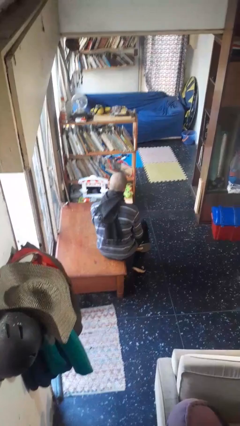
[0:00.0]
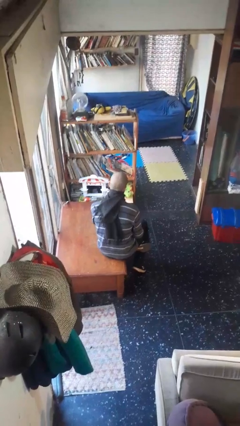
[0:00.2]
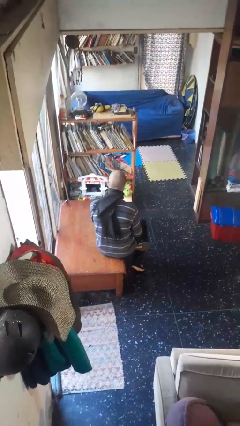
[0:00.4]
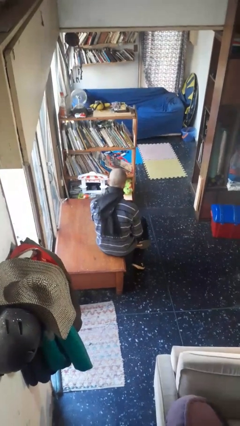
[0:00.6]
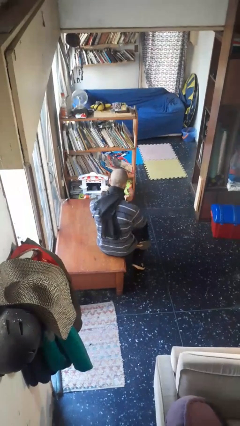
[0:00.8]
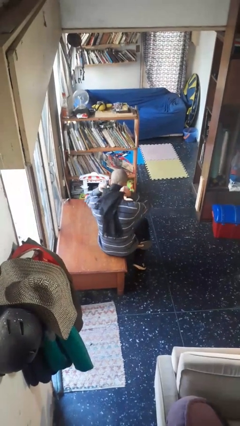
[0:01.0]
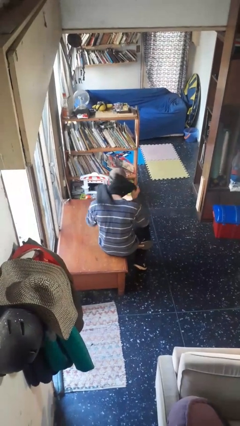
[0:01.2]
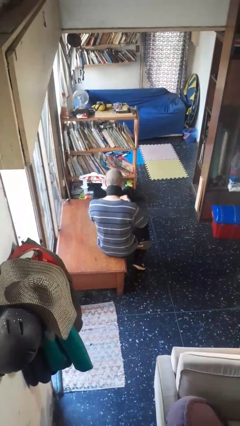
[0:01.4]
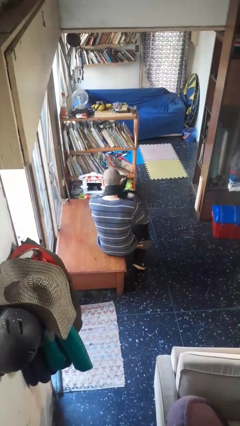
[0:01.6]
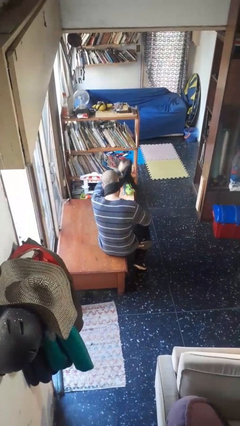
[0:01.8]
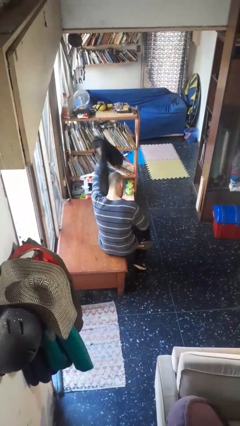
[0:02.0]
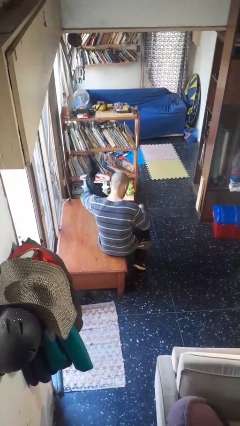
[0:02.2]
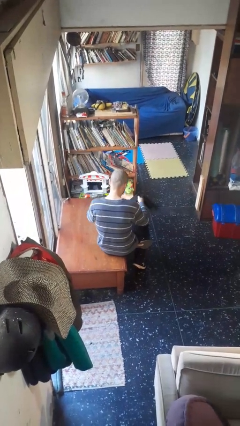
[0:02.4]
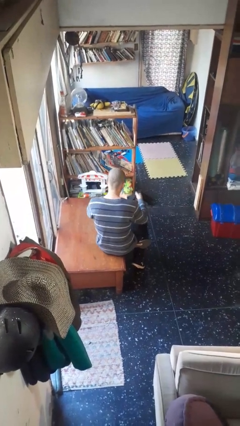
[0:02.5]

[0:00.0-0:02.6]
person takes off scarf

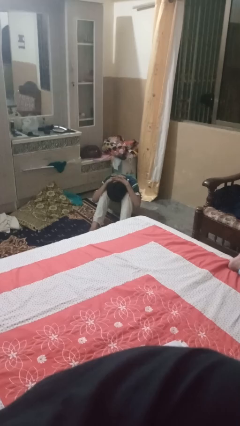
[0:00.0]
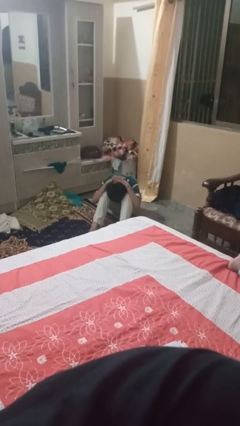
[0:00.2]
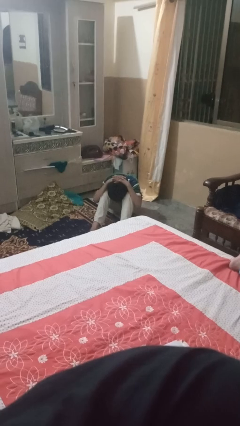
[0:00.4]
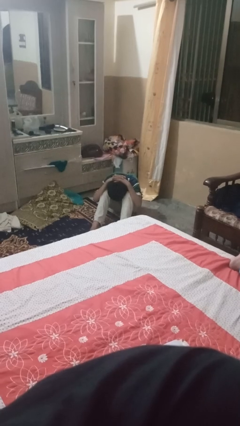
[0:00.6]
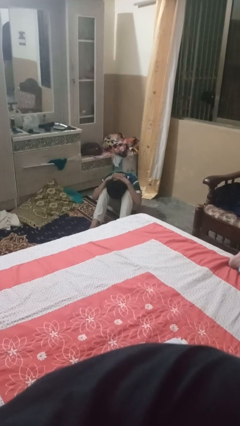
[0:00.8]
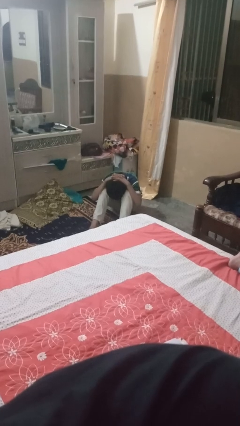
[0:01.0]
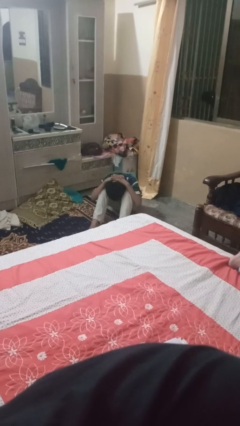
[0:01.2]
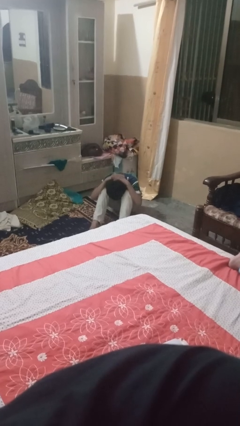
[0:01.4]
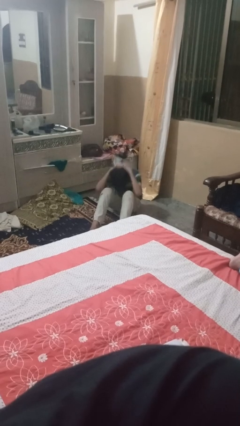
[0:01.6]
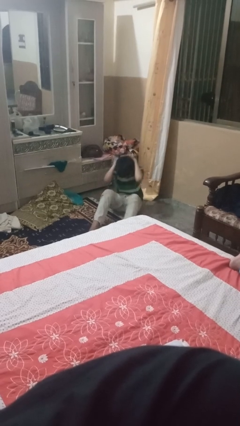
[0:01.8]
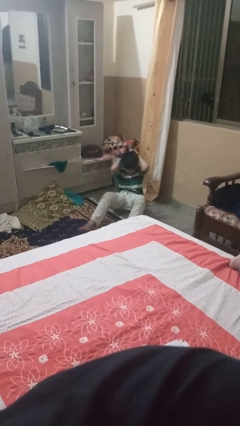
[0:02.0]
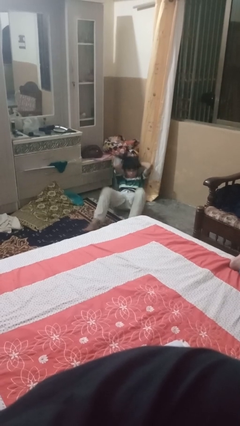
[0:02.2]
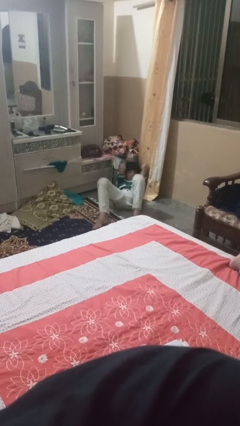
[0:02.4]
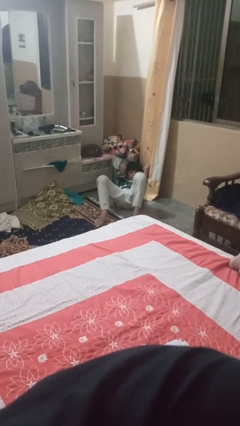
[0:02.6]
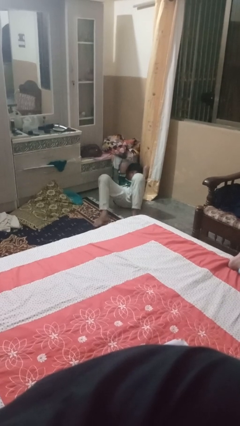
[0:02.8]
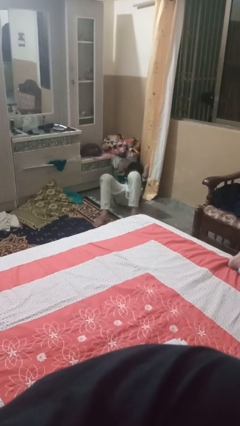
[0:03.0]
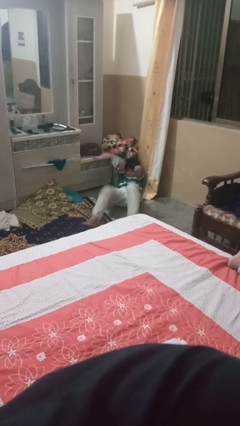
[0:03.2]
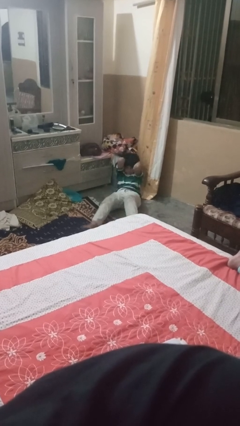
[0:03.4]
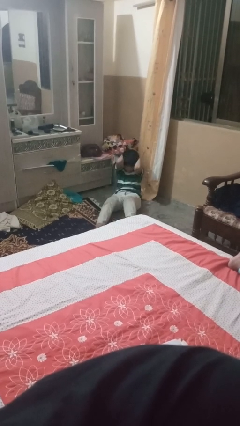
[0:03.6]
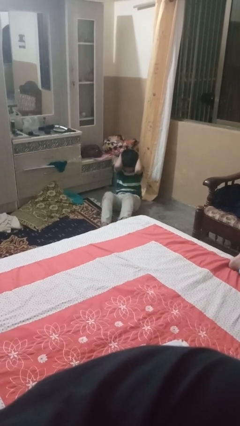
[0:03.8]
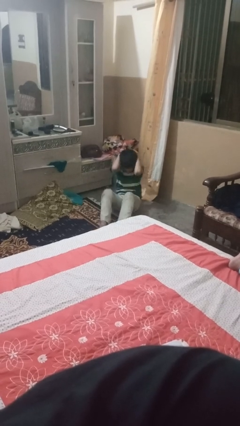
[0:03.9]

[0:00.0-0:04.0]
person exercises with situp

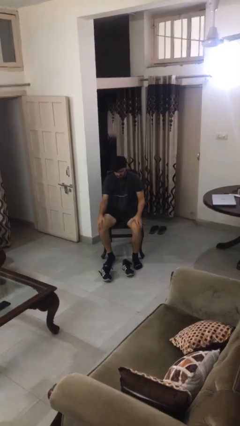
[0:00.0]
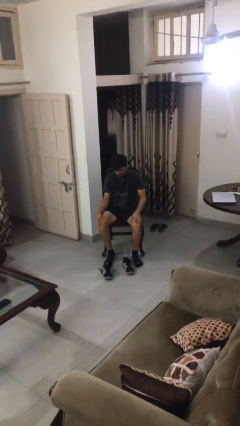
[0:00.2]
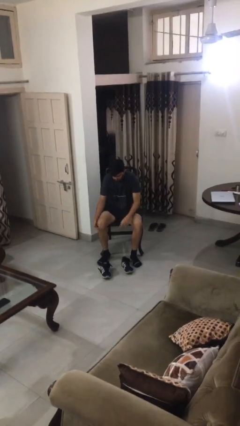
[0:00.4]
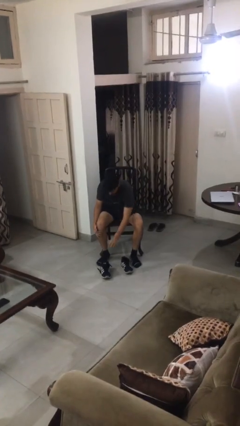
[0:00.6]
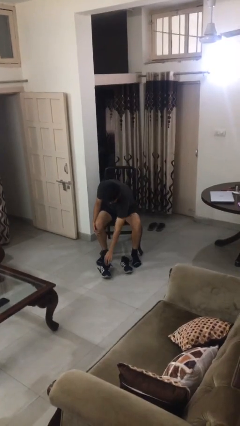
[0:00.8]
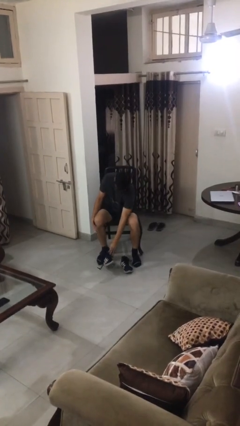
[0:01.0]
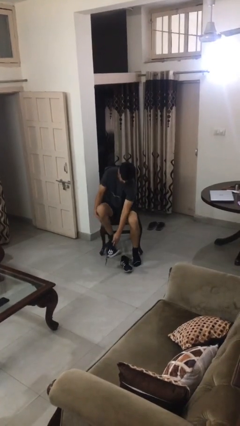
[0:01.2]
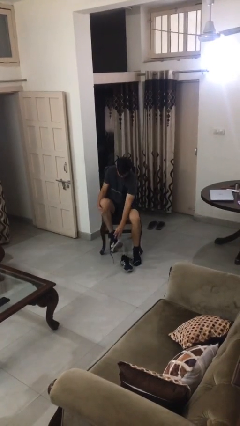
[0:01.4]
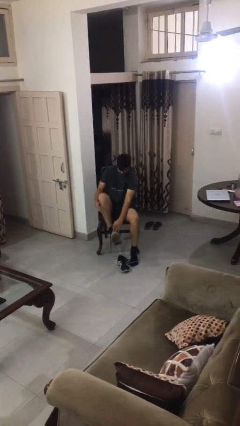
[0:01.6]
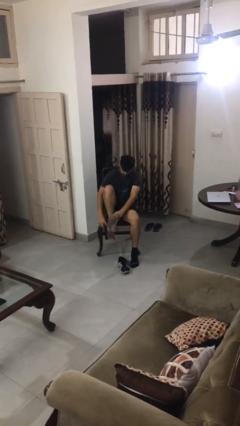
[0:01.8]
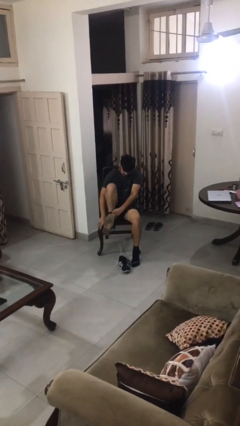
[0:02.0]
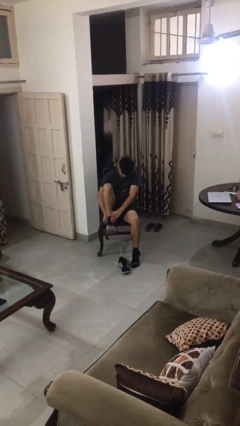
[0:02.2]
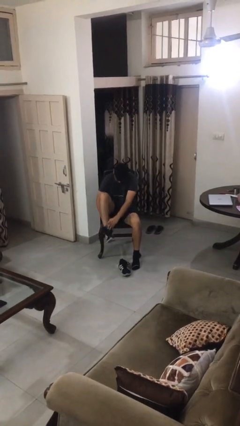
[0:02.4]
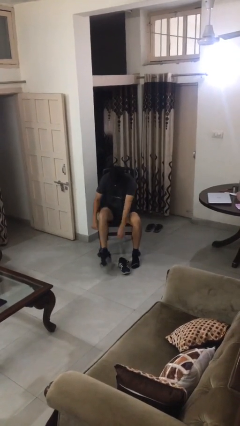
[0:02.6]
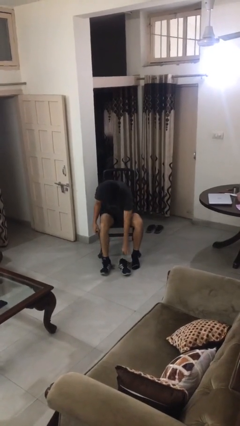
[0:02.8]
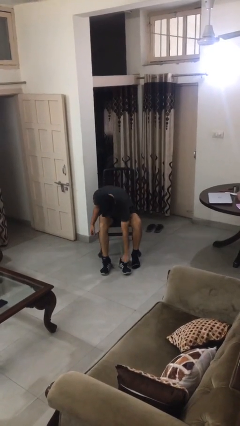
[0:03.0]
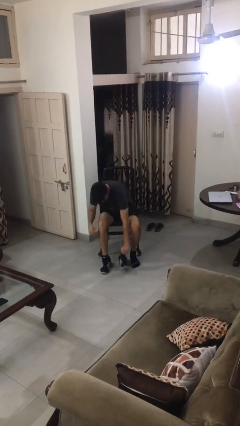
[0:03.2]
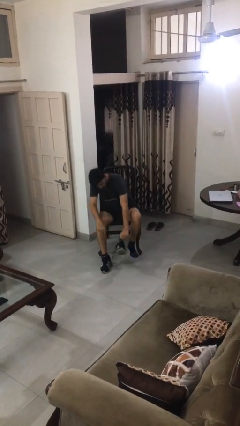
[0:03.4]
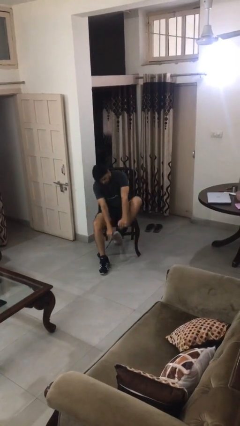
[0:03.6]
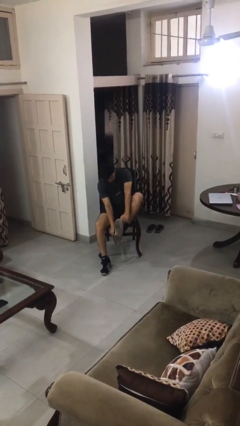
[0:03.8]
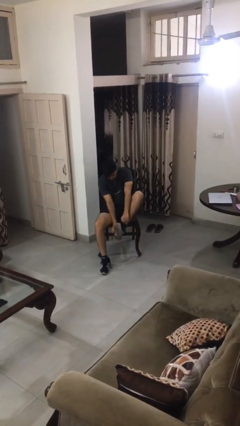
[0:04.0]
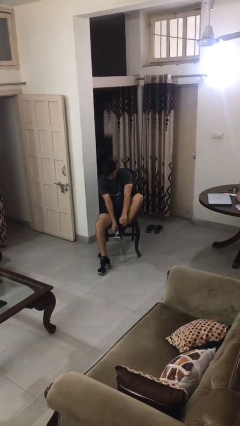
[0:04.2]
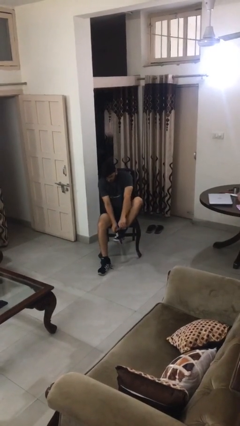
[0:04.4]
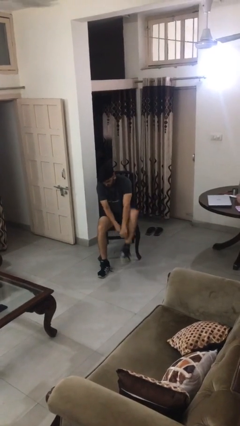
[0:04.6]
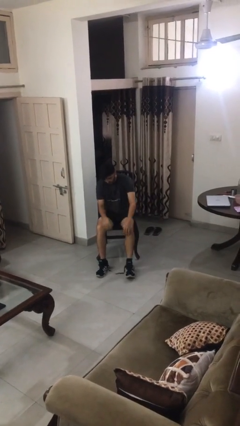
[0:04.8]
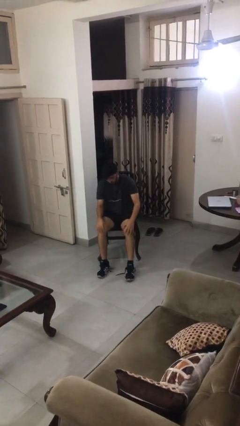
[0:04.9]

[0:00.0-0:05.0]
person puts on shoes

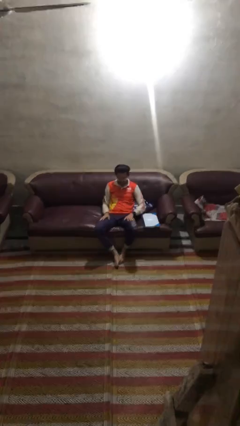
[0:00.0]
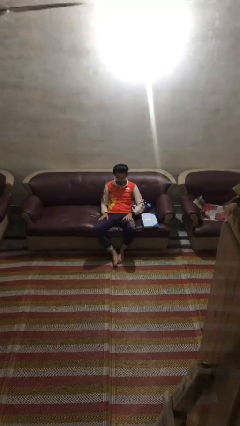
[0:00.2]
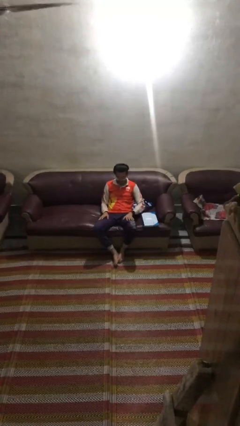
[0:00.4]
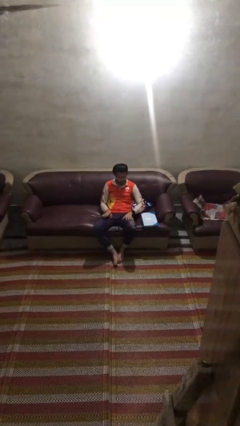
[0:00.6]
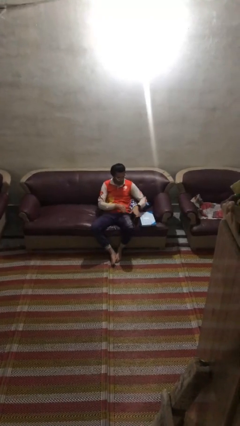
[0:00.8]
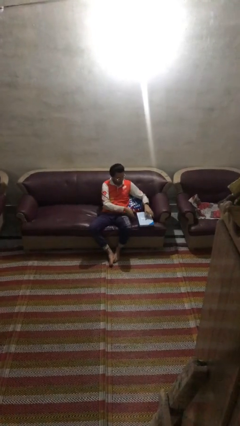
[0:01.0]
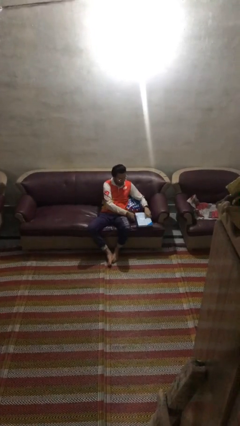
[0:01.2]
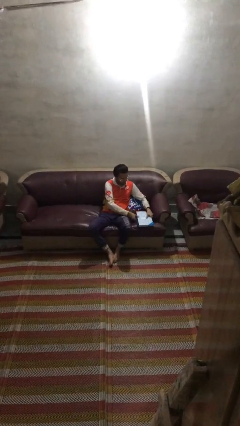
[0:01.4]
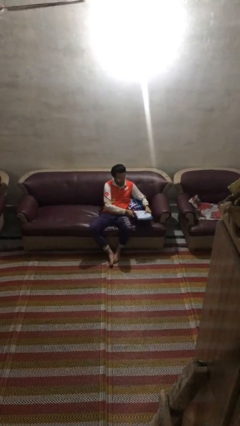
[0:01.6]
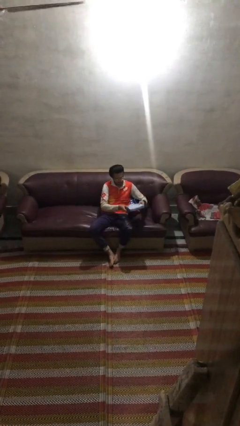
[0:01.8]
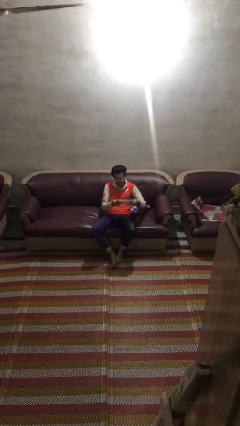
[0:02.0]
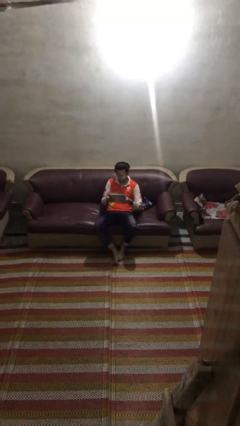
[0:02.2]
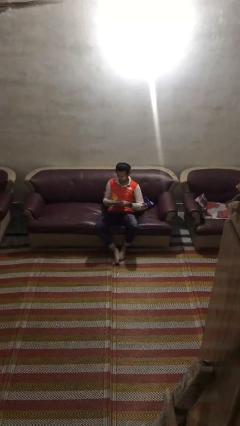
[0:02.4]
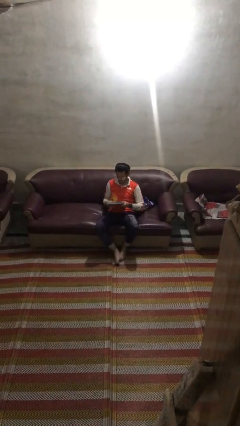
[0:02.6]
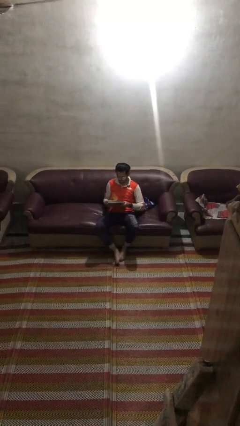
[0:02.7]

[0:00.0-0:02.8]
person picks up object from couch

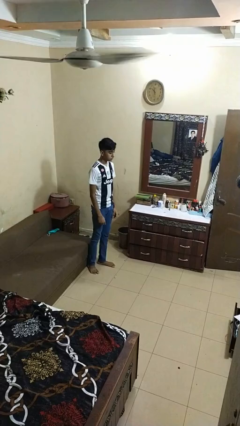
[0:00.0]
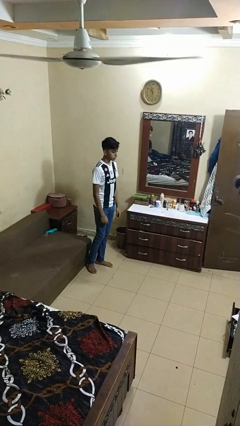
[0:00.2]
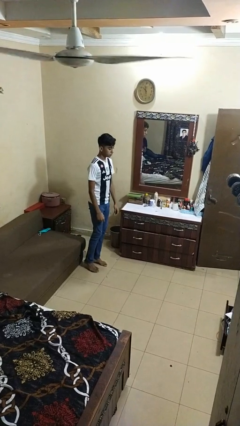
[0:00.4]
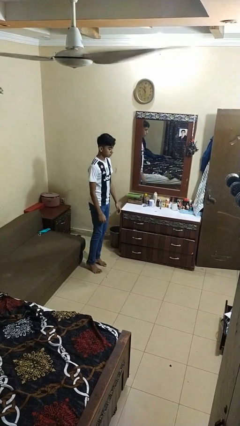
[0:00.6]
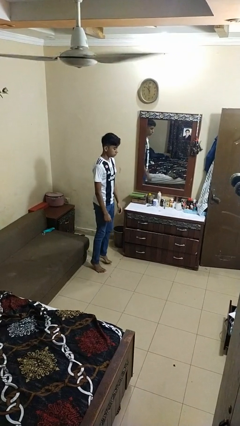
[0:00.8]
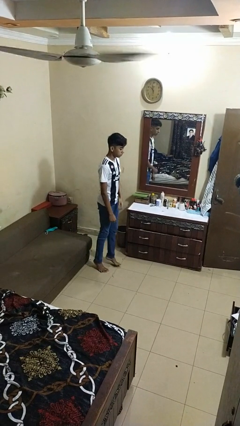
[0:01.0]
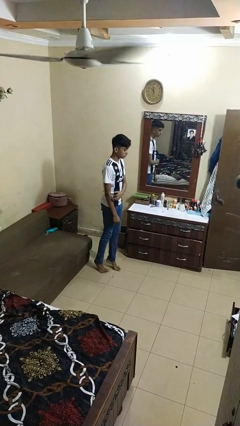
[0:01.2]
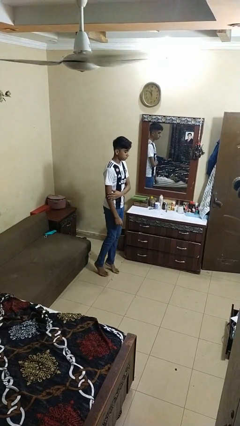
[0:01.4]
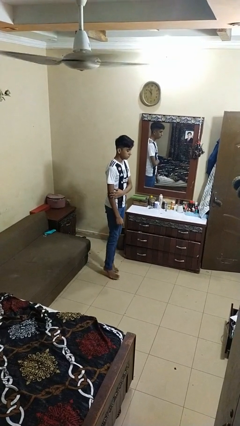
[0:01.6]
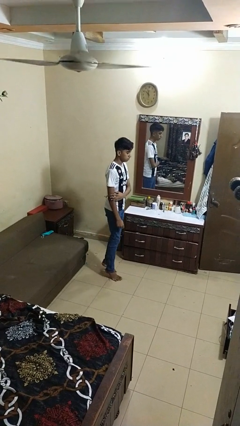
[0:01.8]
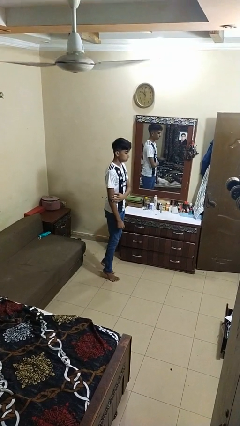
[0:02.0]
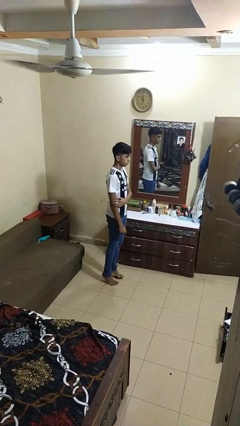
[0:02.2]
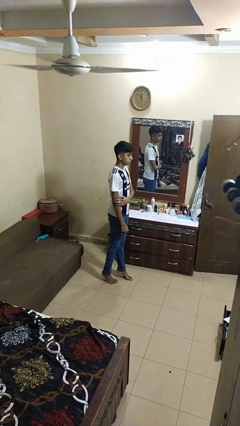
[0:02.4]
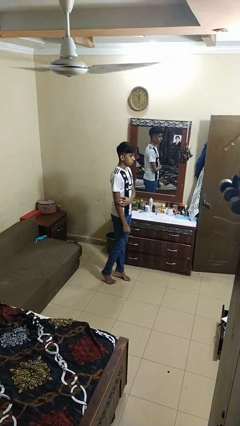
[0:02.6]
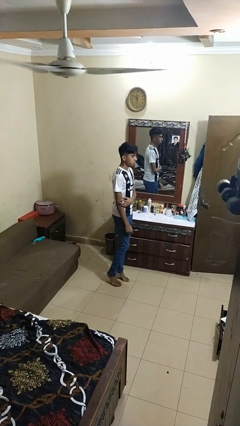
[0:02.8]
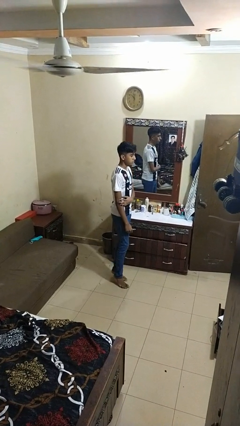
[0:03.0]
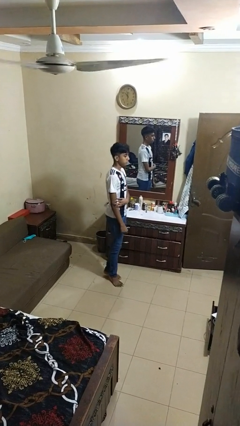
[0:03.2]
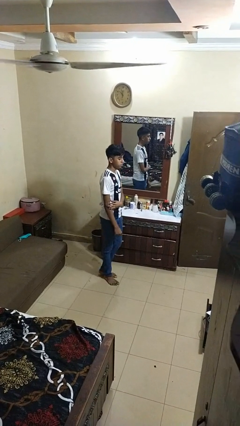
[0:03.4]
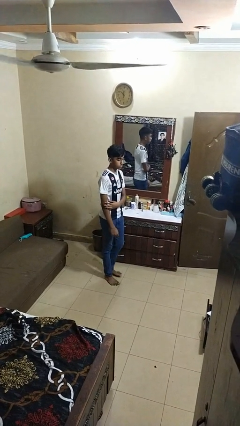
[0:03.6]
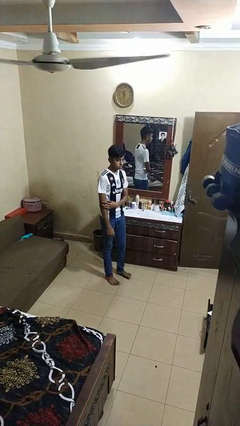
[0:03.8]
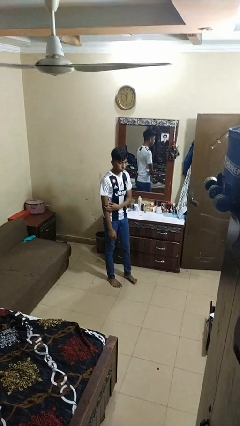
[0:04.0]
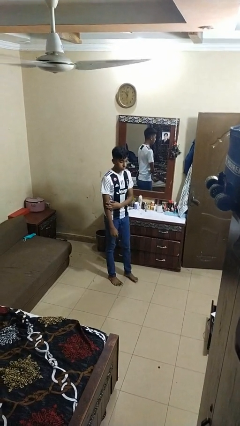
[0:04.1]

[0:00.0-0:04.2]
person walks tiptoe
